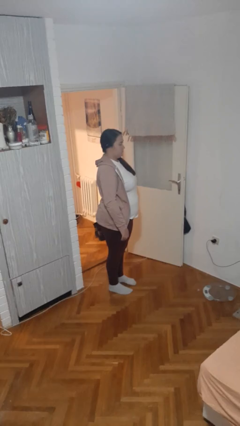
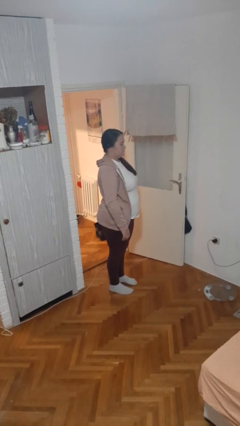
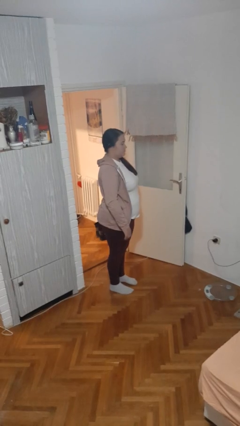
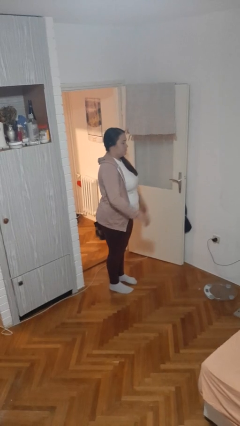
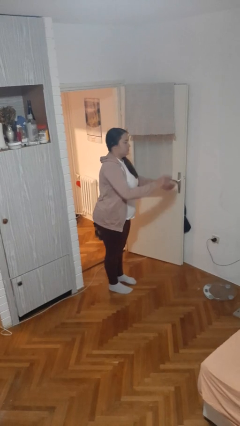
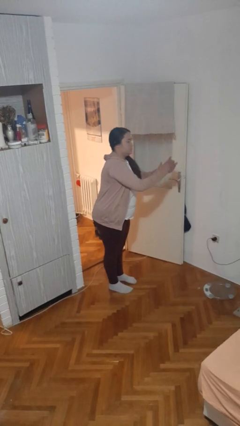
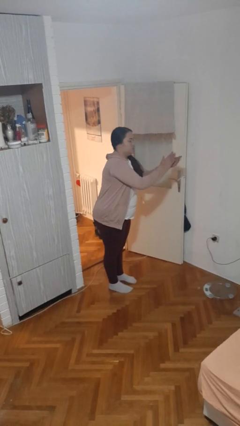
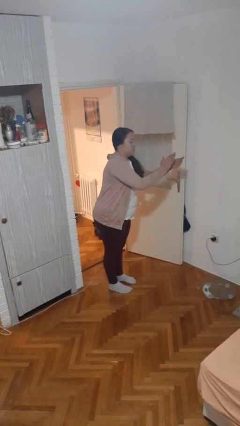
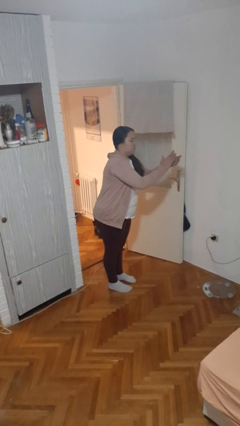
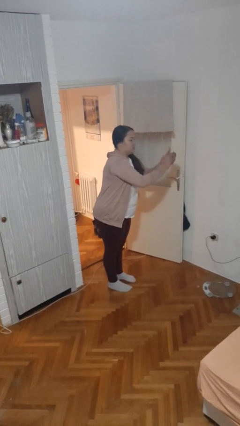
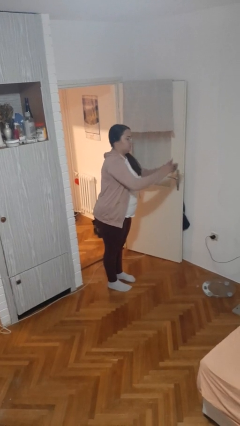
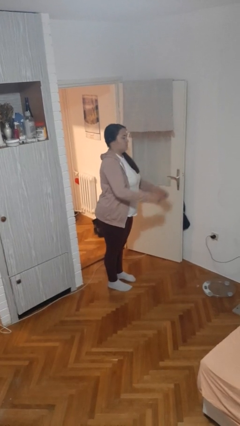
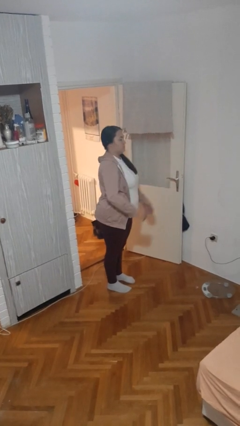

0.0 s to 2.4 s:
person claps hands

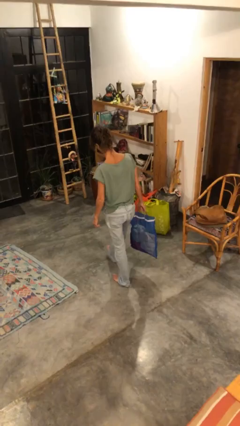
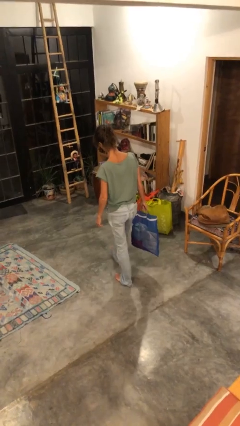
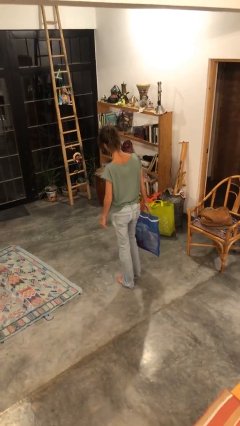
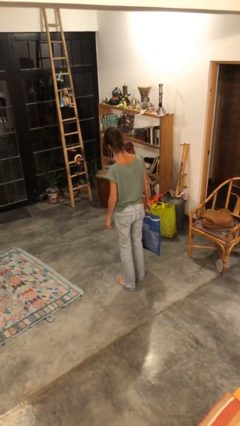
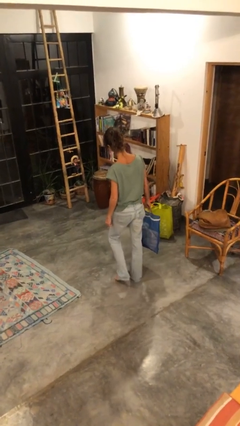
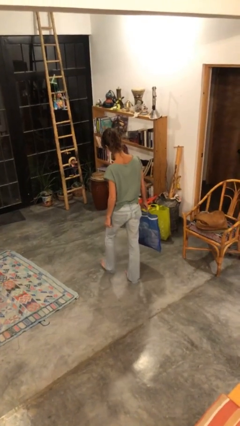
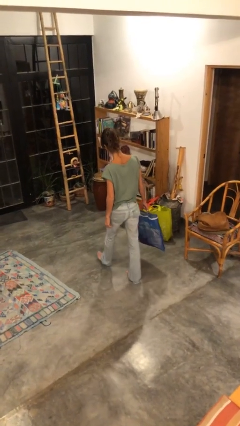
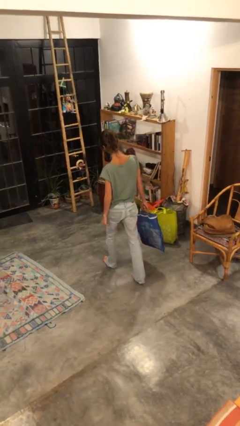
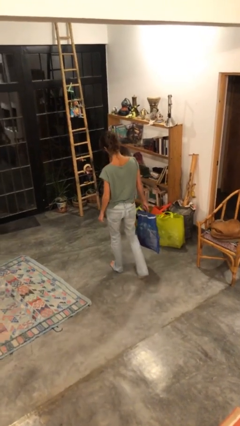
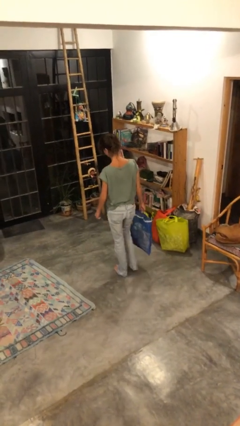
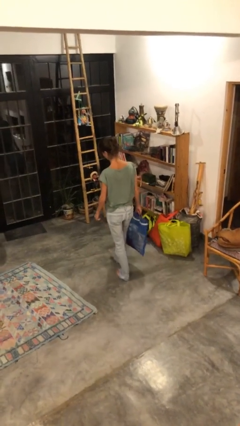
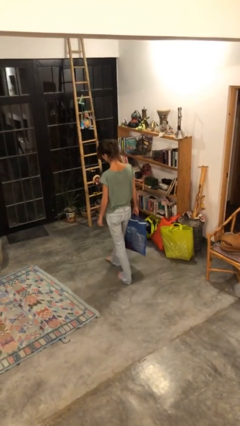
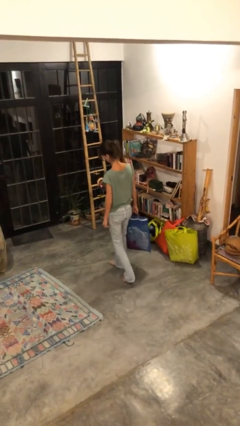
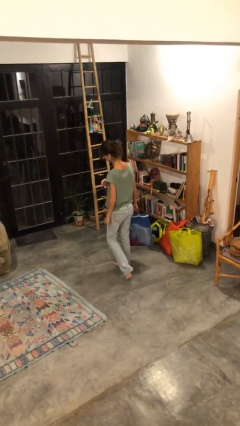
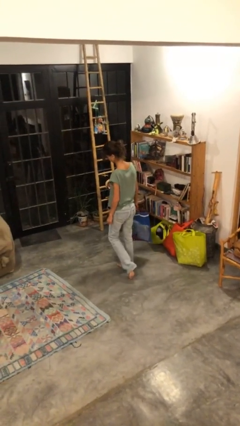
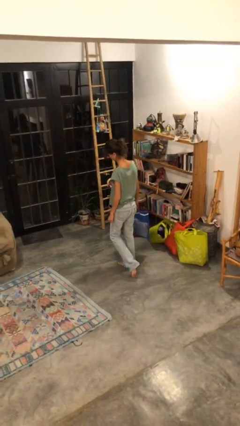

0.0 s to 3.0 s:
person carries groceries

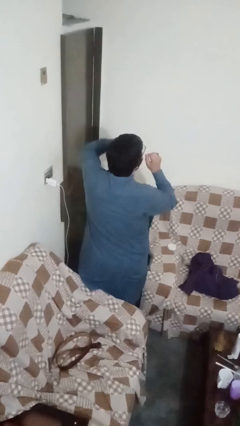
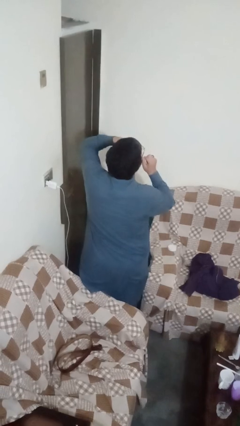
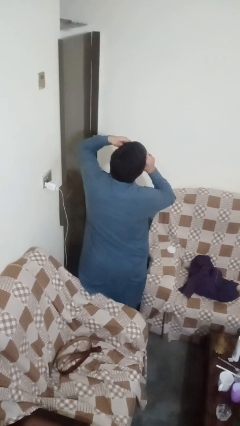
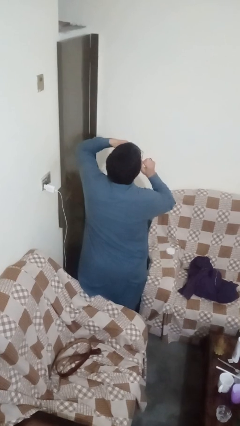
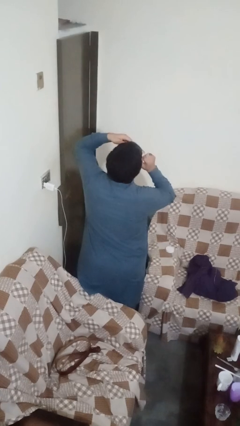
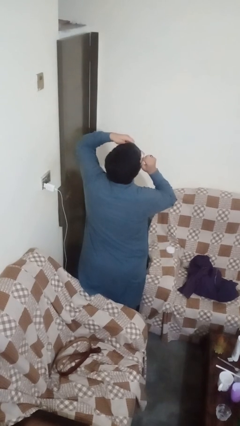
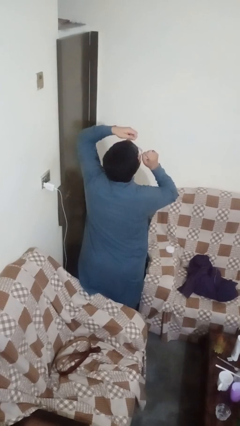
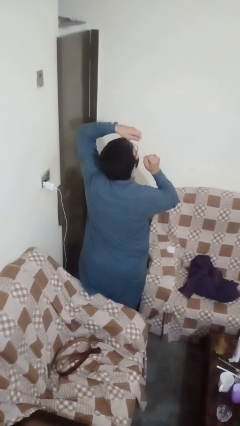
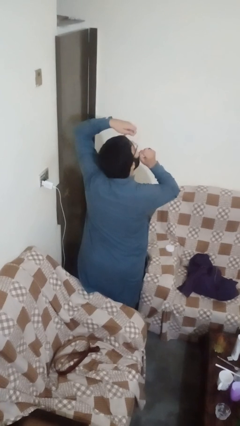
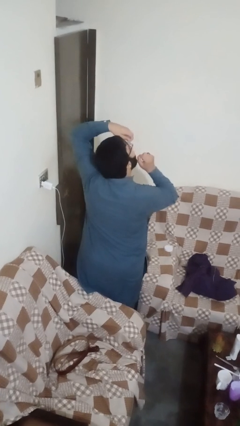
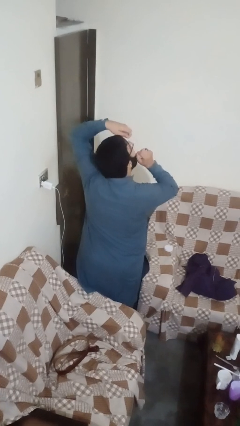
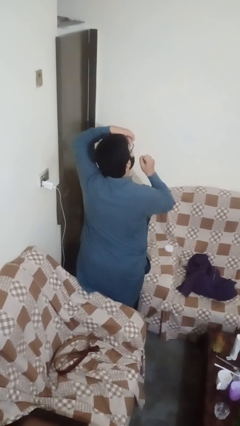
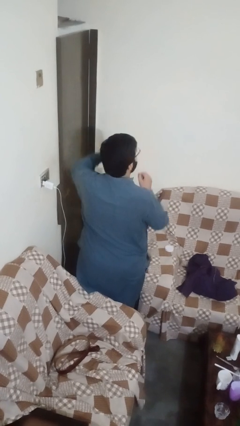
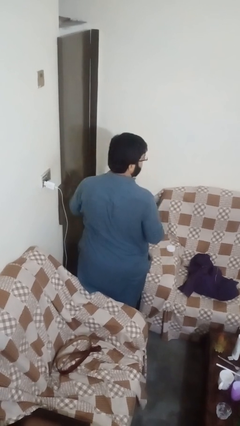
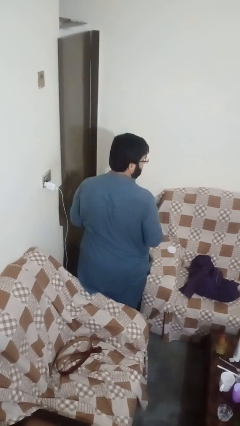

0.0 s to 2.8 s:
person flosses

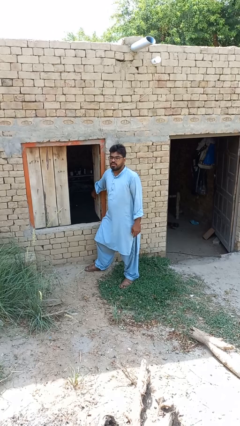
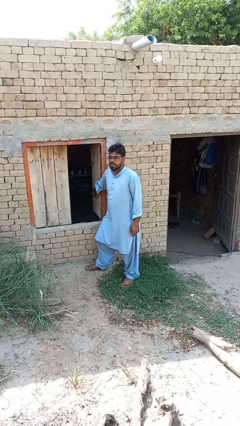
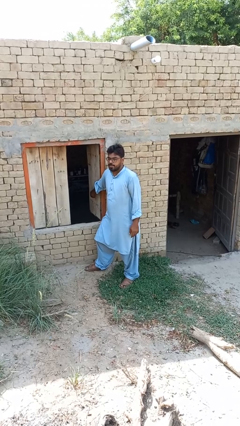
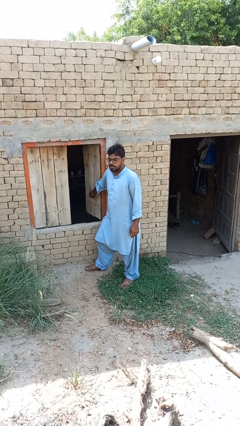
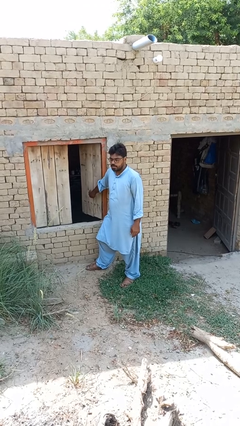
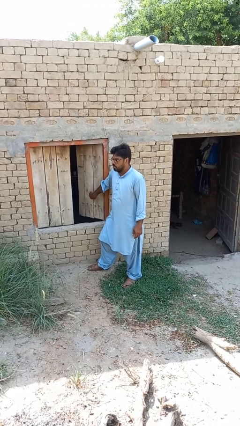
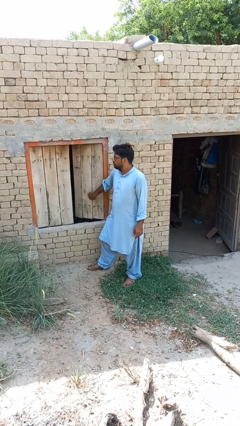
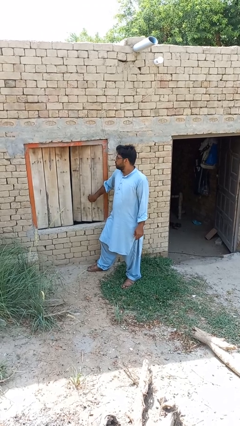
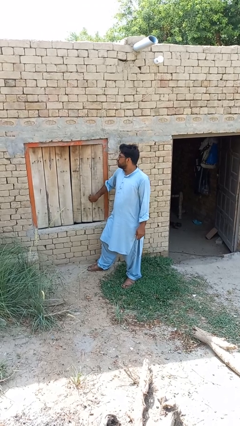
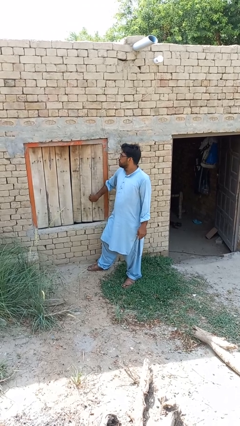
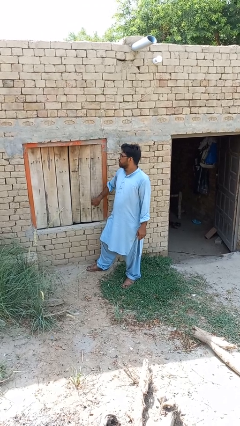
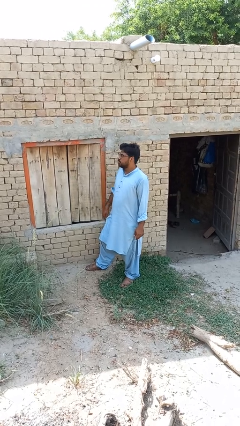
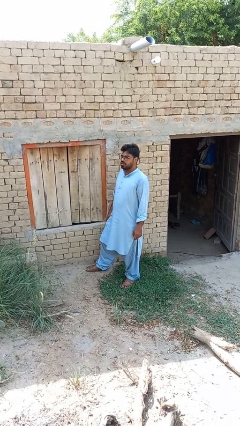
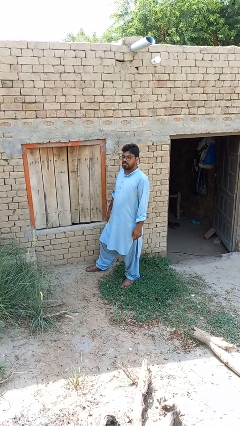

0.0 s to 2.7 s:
person closes home window

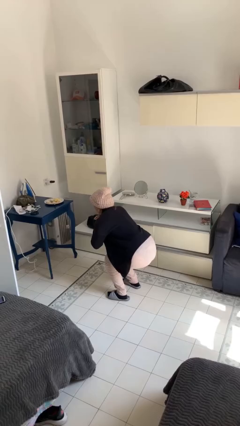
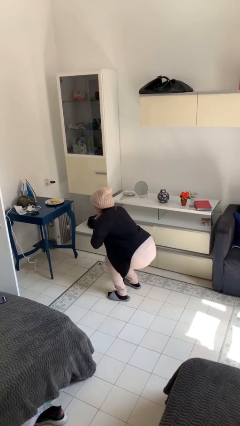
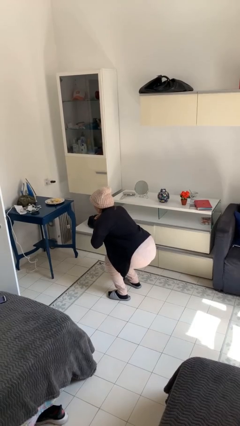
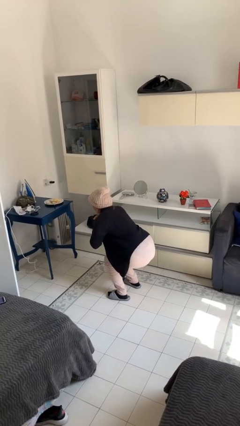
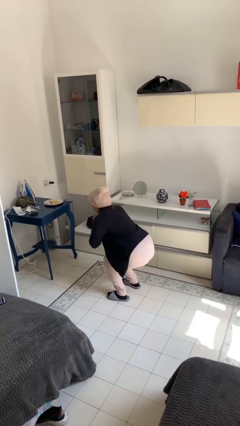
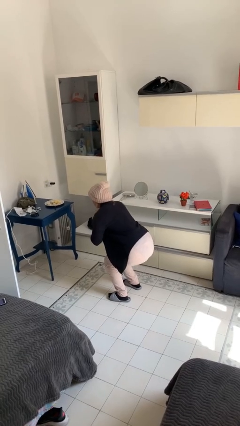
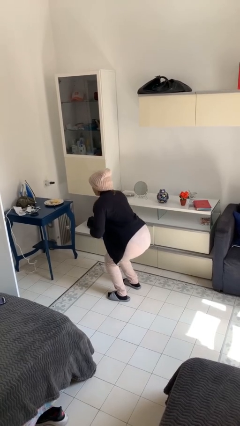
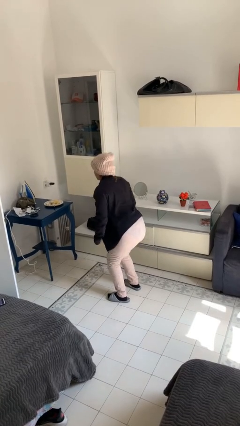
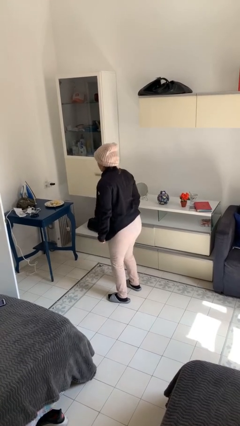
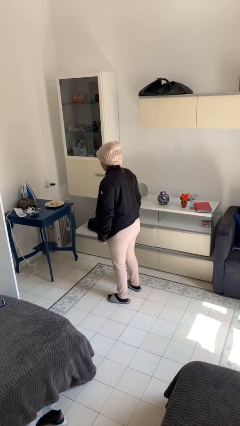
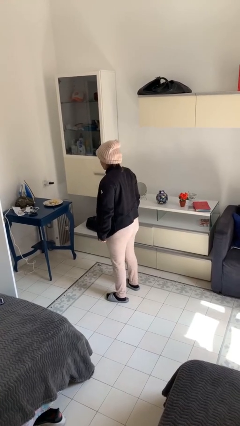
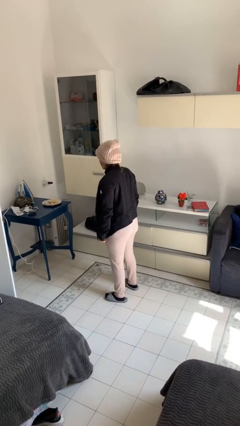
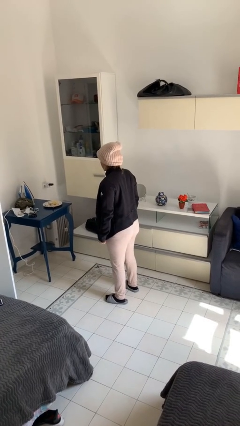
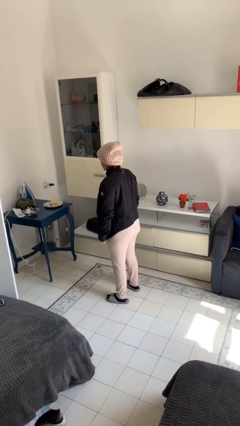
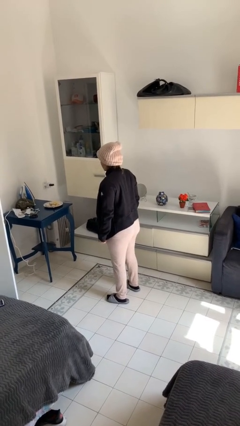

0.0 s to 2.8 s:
person stands up

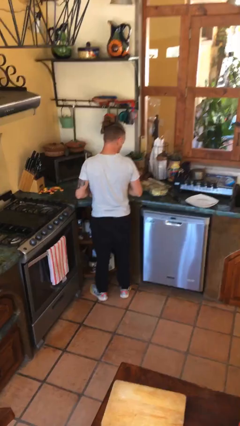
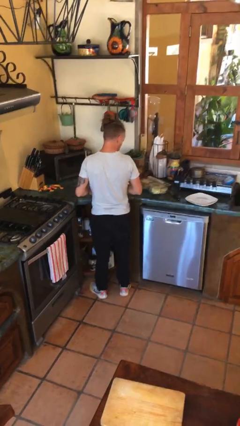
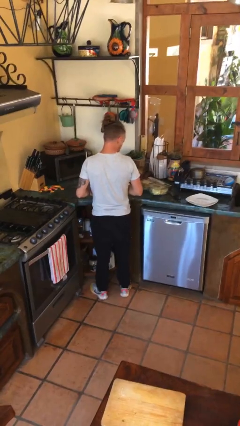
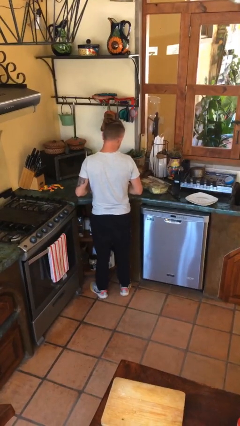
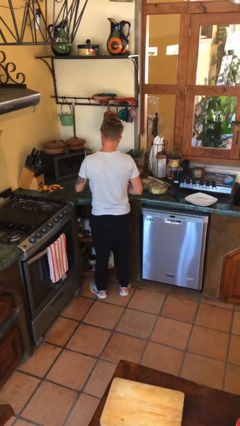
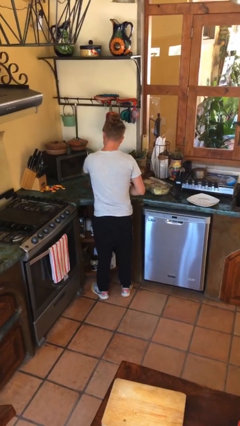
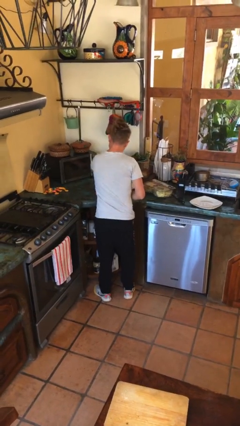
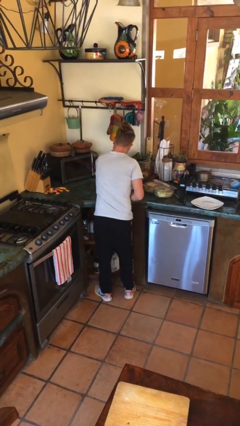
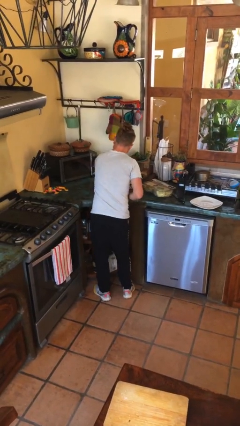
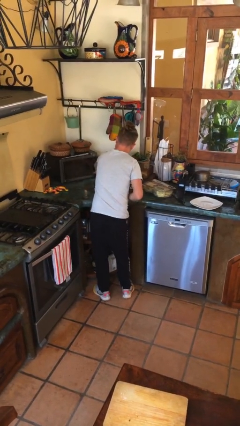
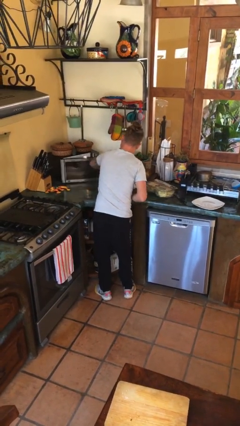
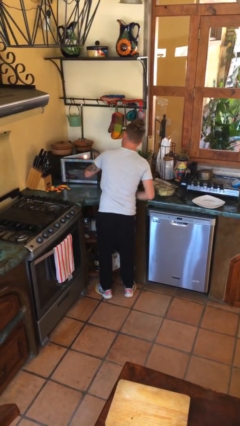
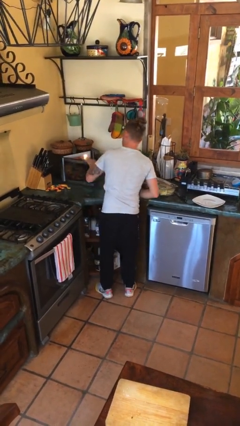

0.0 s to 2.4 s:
person opens microwave

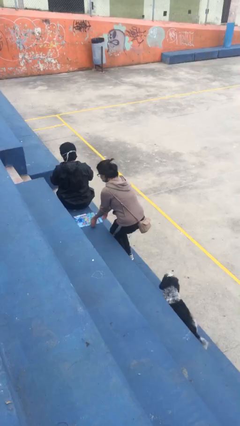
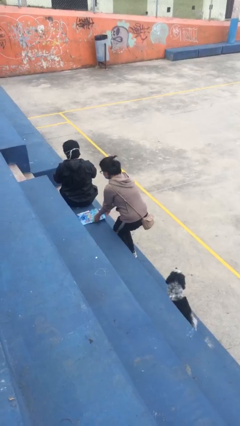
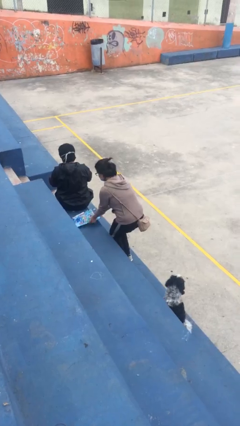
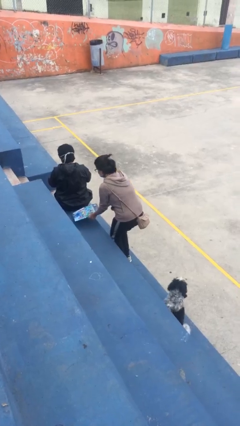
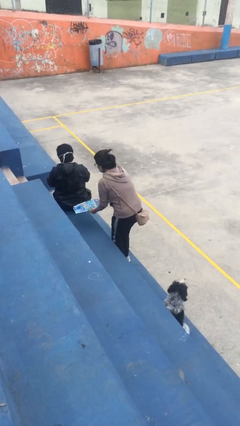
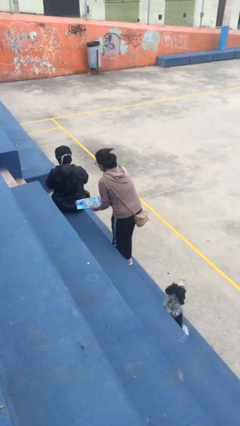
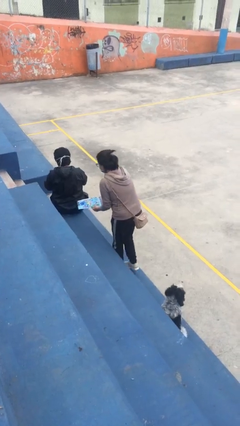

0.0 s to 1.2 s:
person steals object from person
